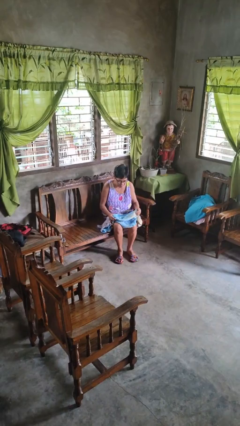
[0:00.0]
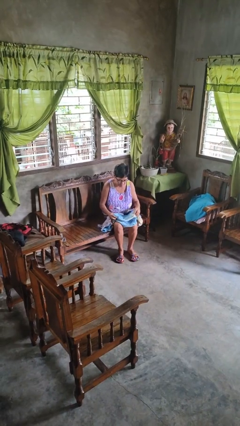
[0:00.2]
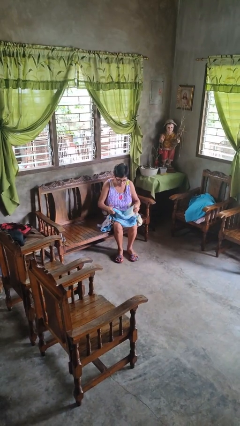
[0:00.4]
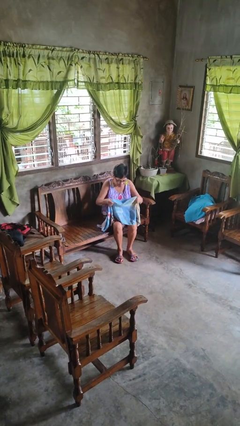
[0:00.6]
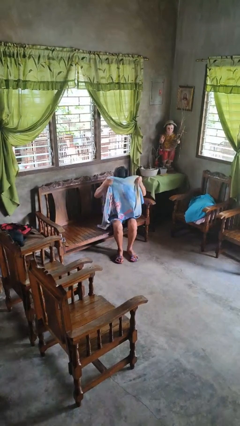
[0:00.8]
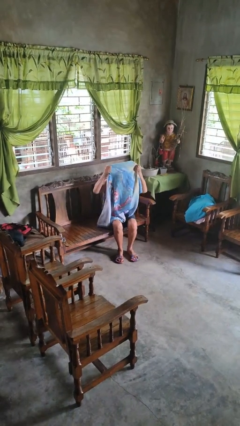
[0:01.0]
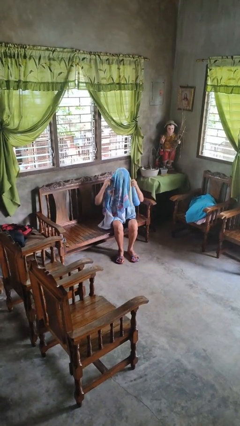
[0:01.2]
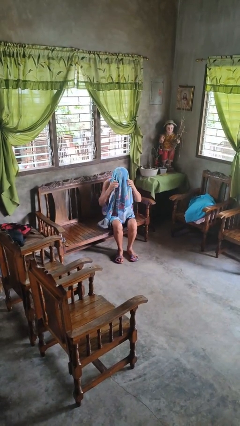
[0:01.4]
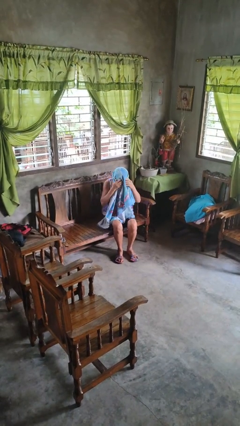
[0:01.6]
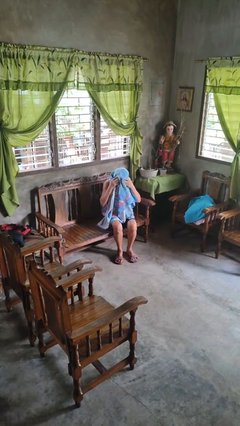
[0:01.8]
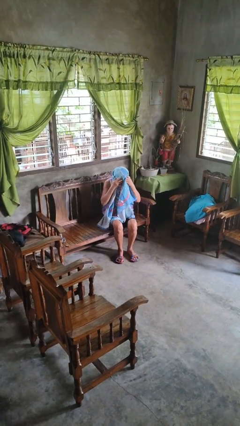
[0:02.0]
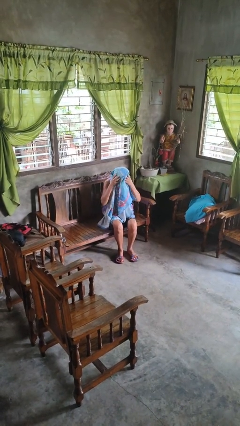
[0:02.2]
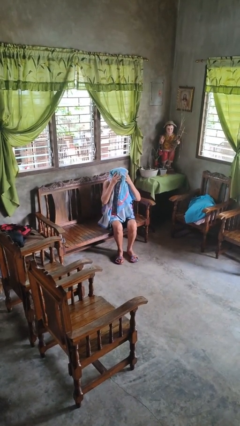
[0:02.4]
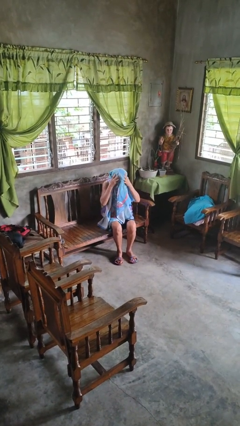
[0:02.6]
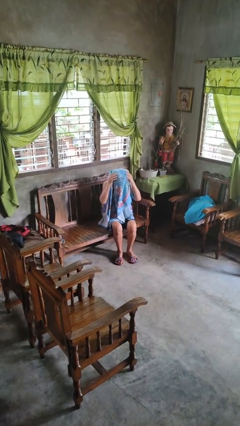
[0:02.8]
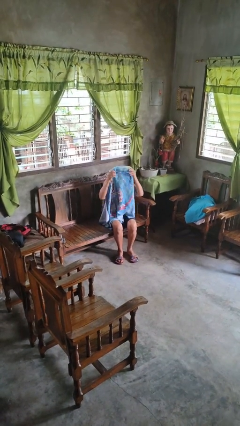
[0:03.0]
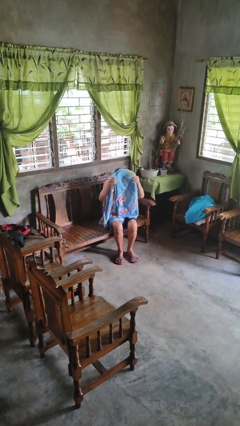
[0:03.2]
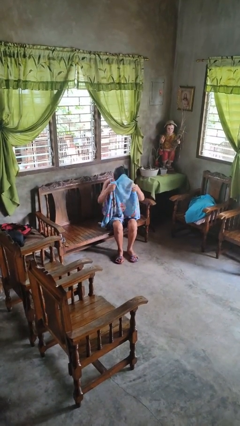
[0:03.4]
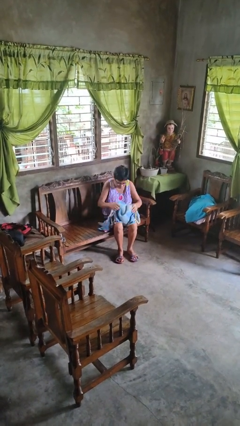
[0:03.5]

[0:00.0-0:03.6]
person dries hair with towel

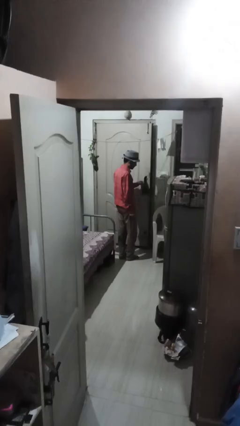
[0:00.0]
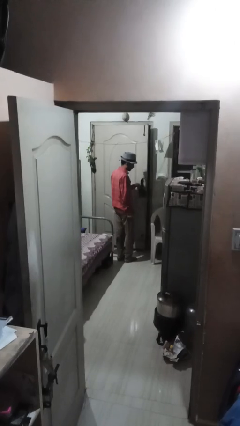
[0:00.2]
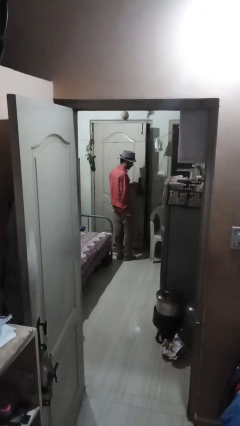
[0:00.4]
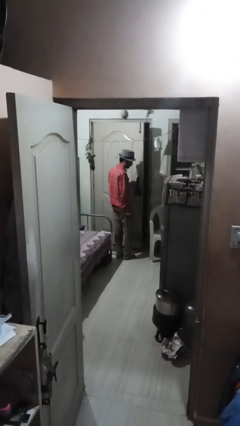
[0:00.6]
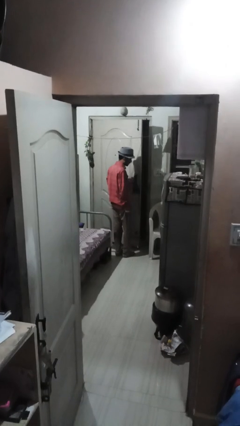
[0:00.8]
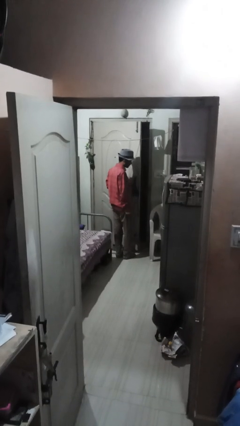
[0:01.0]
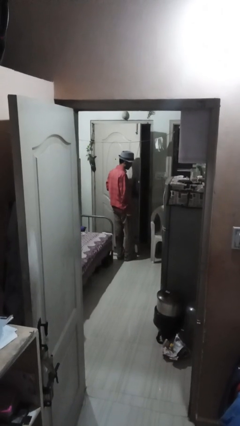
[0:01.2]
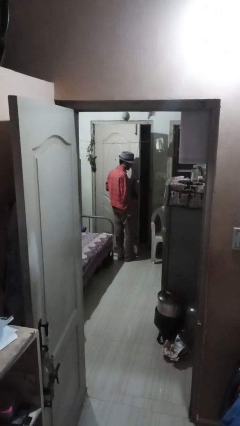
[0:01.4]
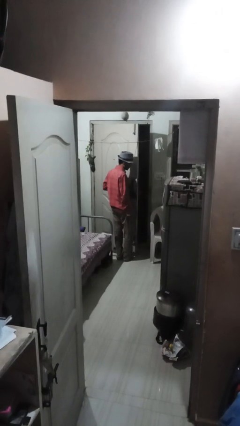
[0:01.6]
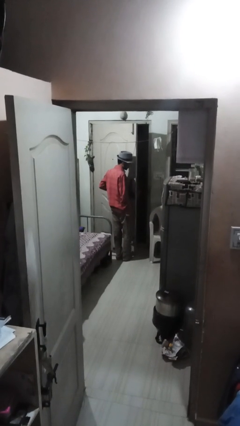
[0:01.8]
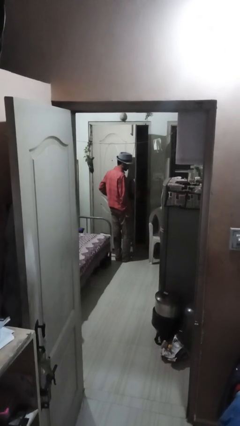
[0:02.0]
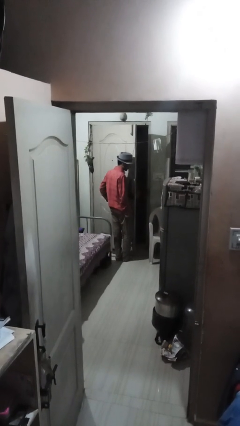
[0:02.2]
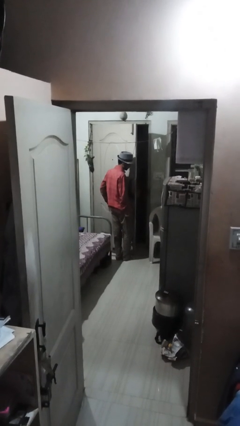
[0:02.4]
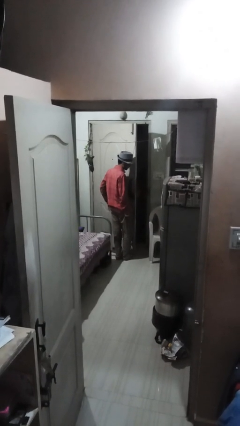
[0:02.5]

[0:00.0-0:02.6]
person opens facility door

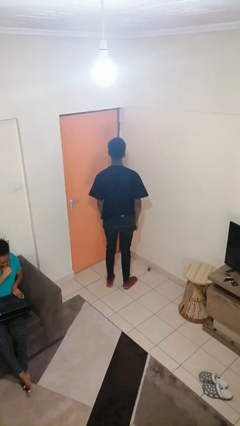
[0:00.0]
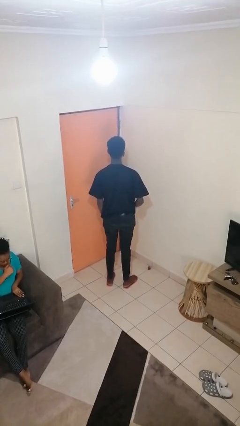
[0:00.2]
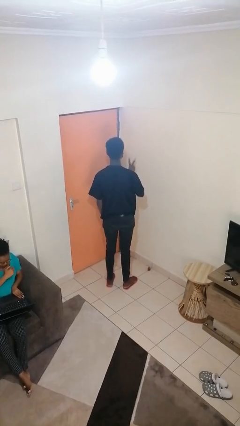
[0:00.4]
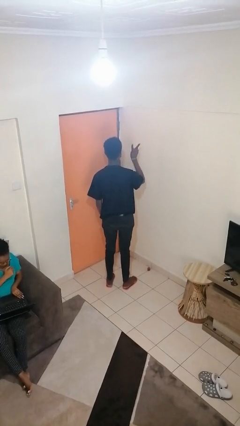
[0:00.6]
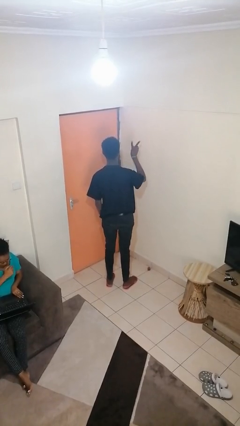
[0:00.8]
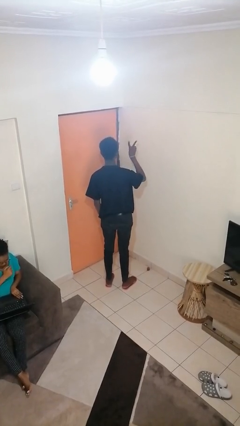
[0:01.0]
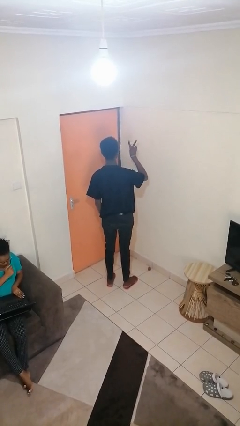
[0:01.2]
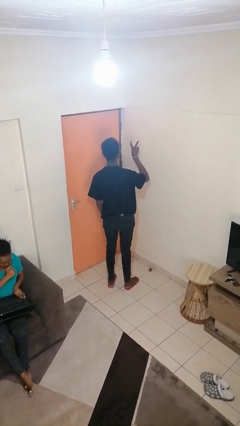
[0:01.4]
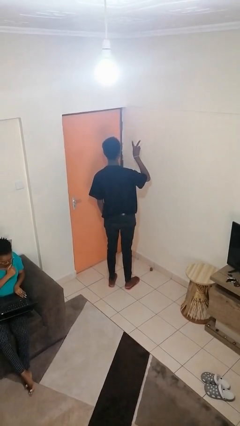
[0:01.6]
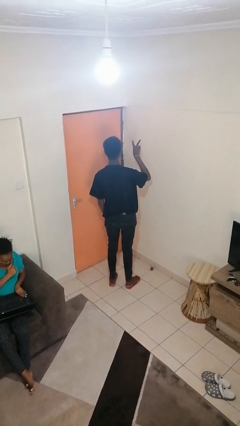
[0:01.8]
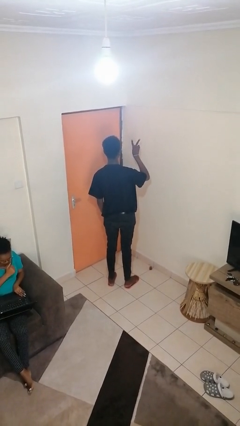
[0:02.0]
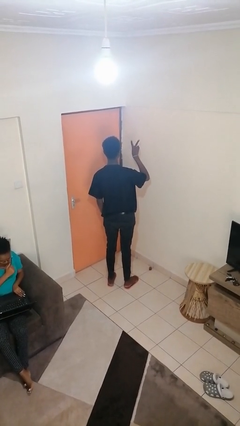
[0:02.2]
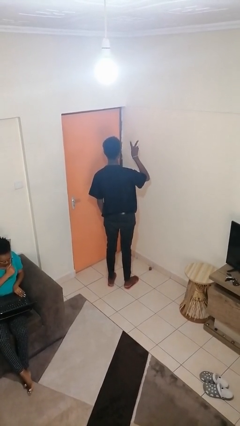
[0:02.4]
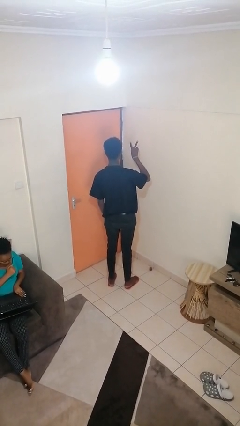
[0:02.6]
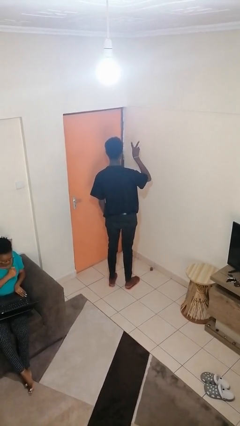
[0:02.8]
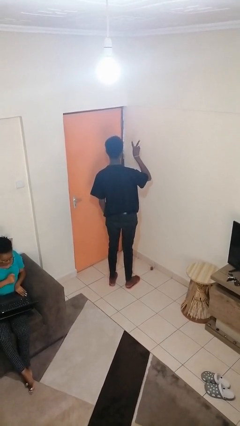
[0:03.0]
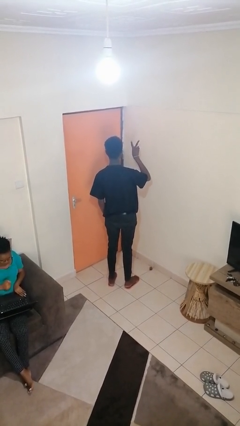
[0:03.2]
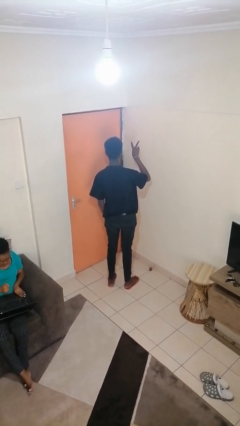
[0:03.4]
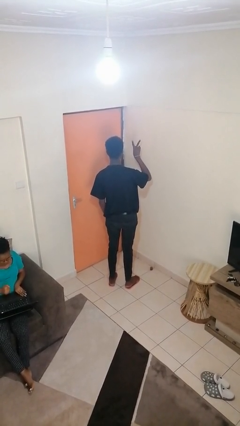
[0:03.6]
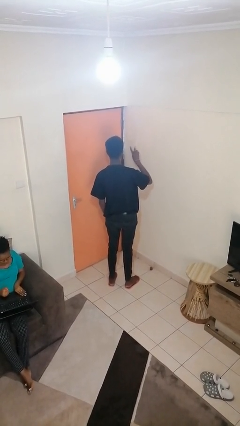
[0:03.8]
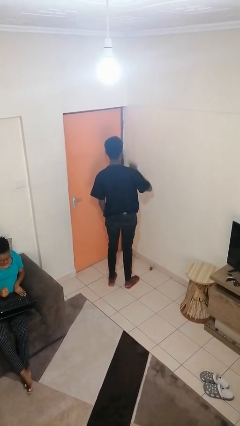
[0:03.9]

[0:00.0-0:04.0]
person gestures peace

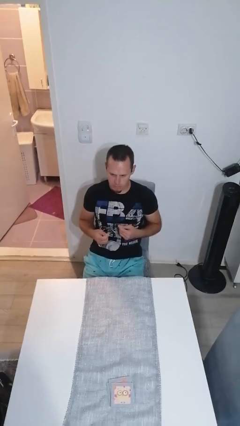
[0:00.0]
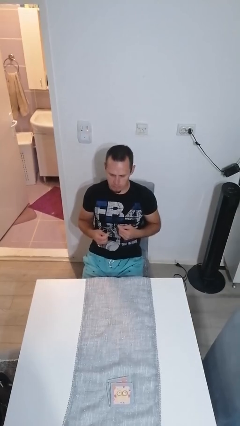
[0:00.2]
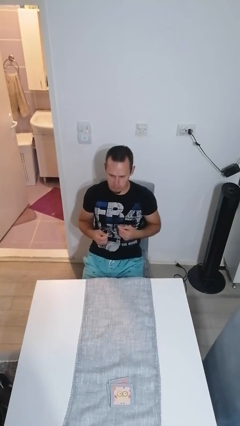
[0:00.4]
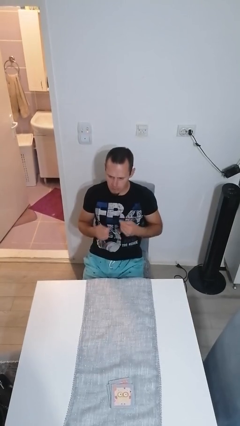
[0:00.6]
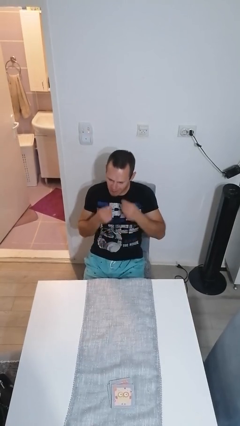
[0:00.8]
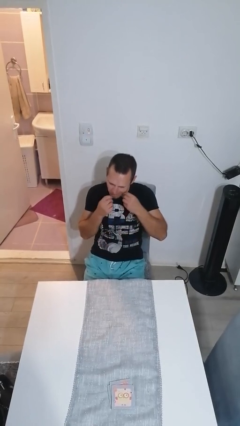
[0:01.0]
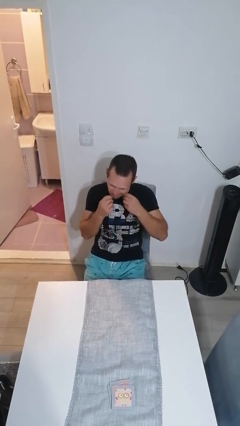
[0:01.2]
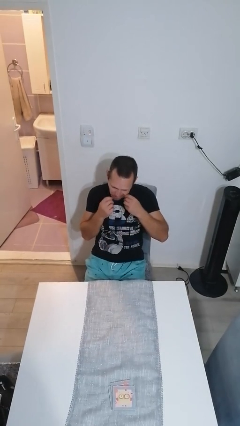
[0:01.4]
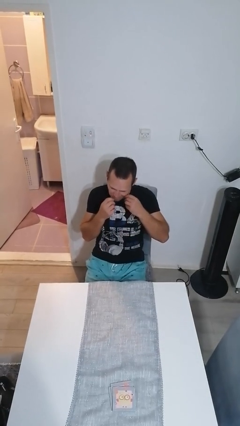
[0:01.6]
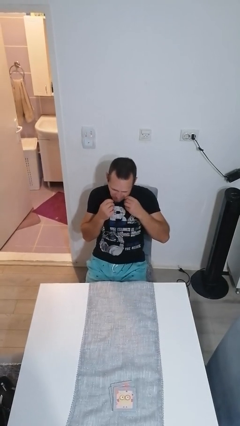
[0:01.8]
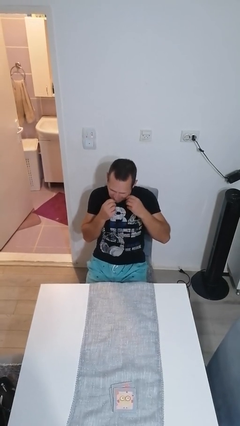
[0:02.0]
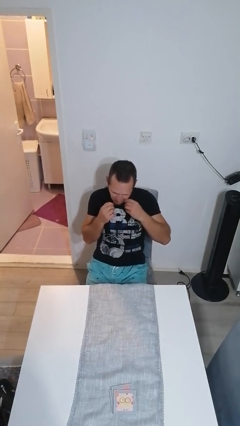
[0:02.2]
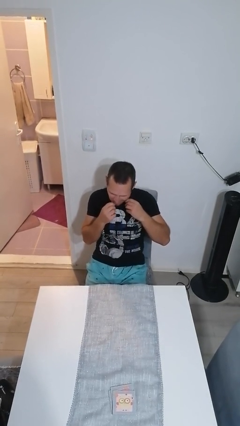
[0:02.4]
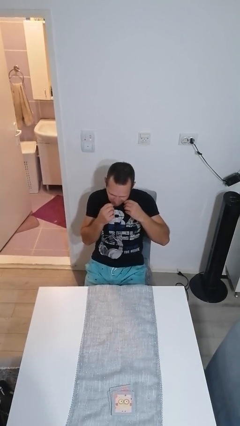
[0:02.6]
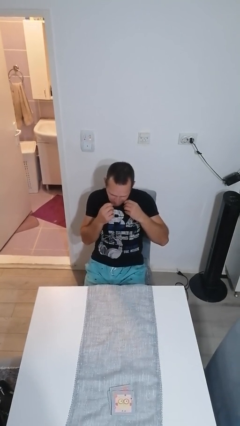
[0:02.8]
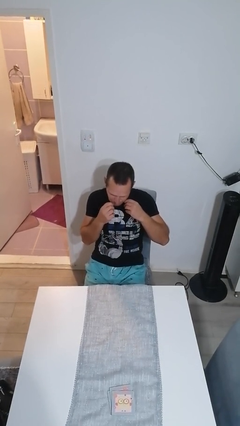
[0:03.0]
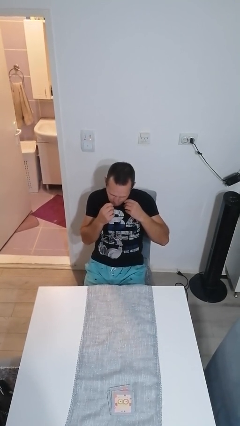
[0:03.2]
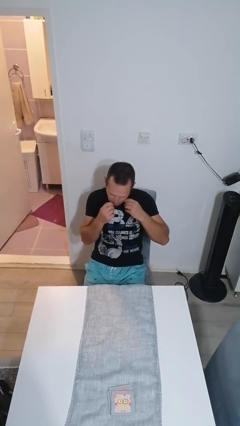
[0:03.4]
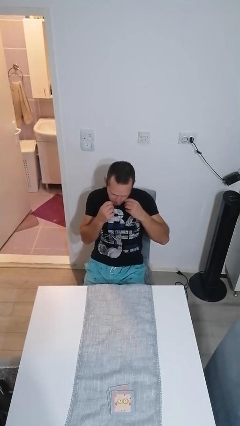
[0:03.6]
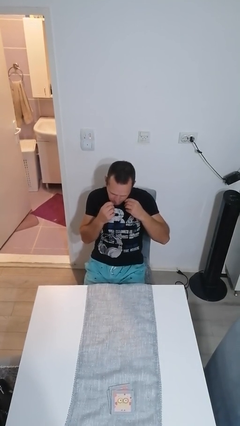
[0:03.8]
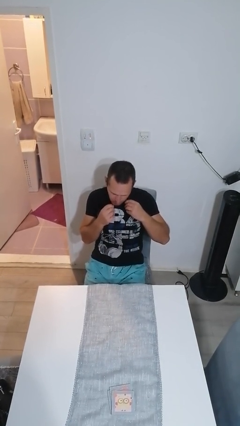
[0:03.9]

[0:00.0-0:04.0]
person flosses

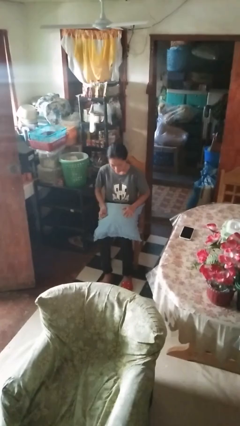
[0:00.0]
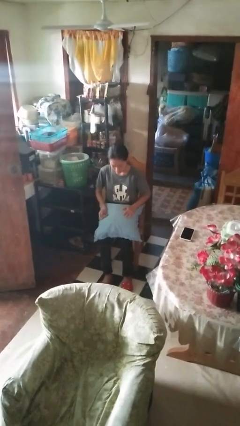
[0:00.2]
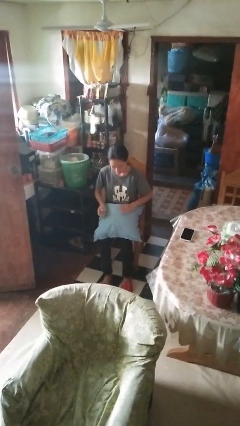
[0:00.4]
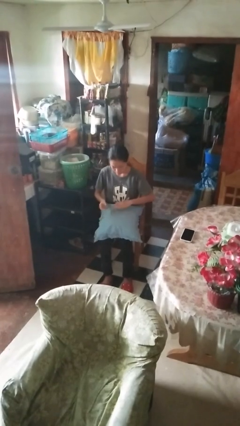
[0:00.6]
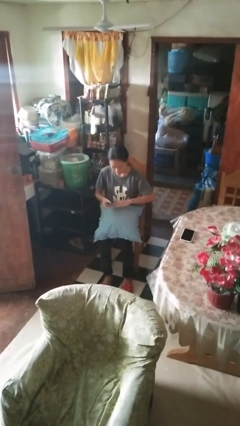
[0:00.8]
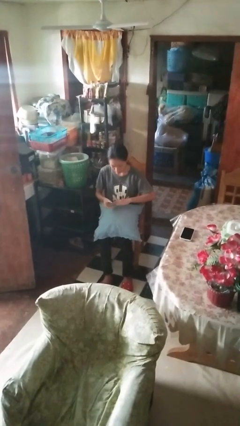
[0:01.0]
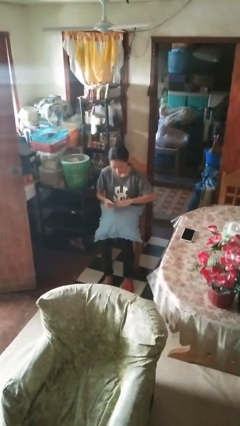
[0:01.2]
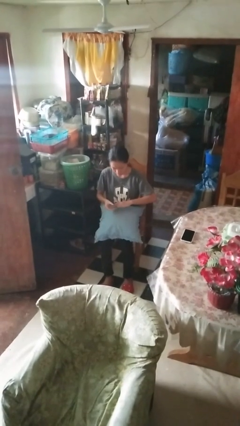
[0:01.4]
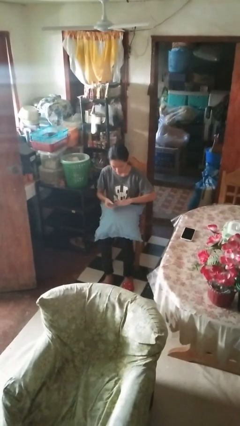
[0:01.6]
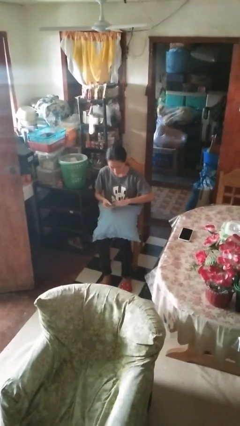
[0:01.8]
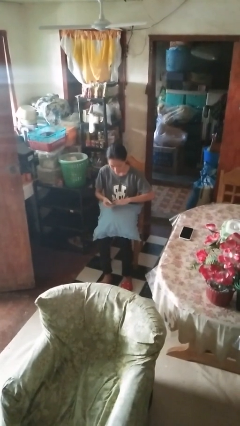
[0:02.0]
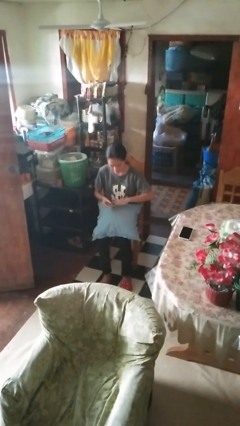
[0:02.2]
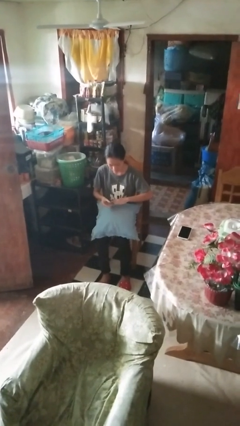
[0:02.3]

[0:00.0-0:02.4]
person clips fingernails

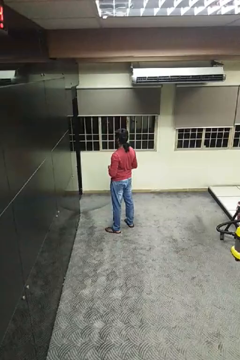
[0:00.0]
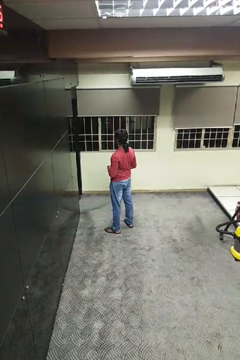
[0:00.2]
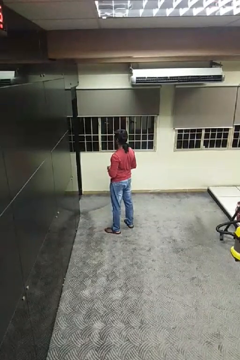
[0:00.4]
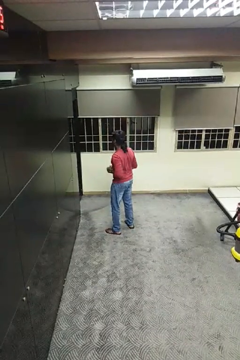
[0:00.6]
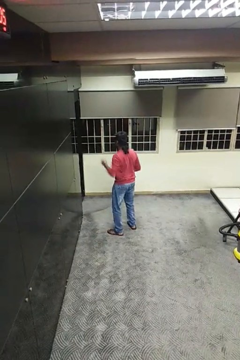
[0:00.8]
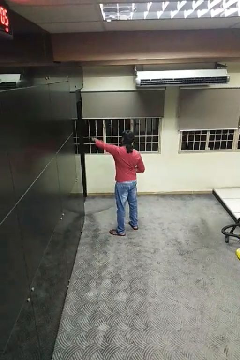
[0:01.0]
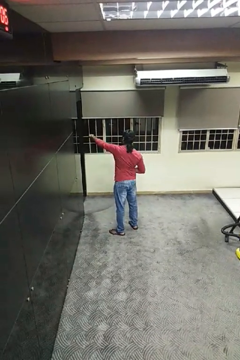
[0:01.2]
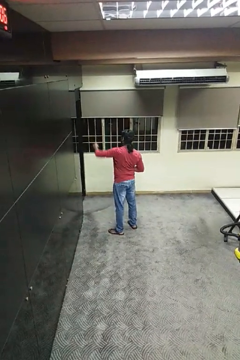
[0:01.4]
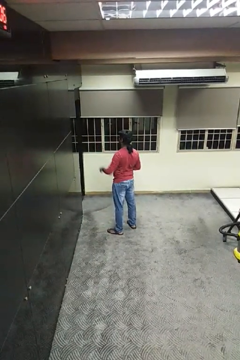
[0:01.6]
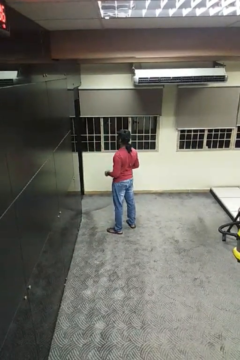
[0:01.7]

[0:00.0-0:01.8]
person punches
